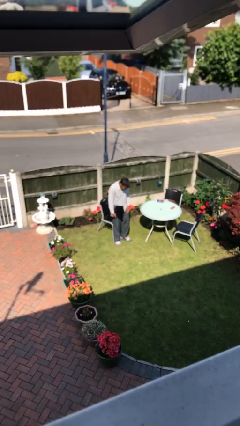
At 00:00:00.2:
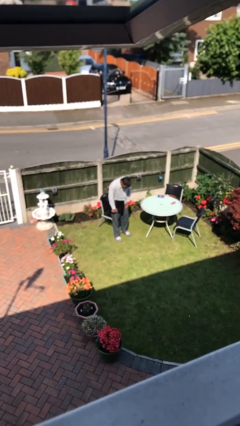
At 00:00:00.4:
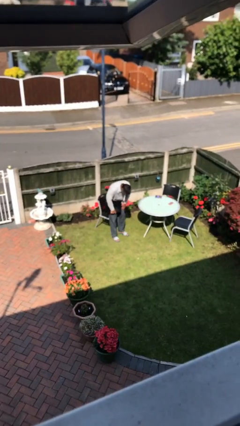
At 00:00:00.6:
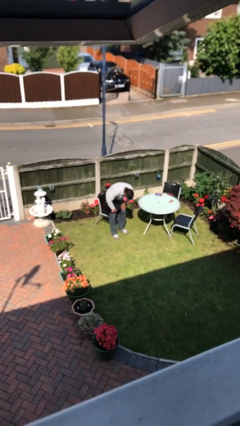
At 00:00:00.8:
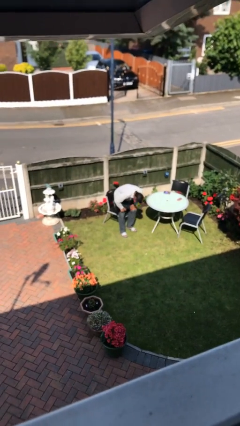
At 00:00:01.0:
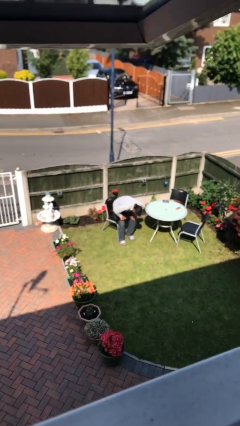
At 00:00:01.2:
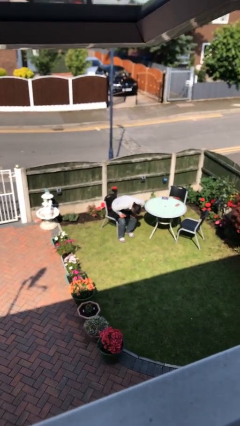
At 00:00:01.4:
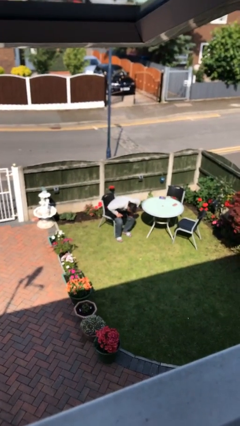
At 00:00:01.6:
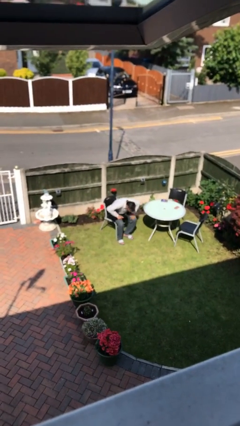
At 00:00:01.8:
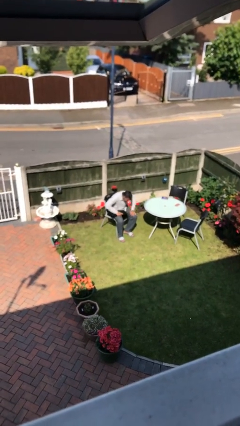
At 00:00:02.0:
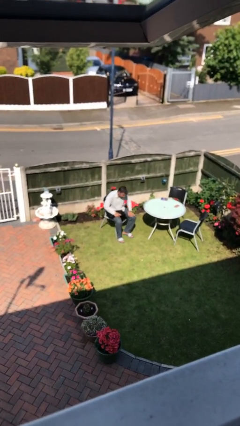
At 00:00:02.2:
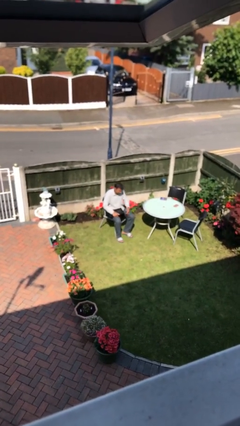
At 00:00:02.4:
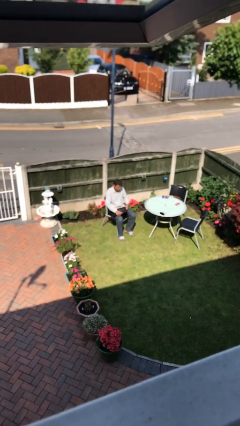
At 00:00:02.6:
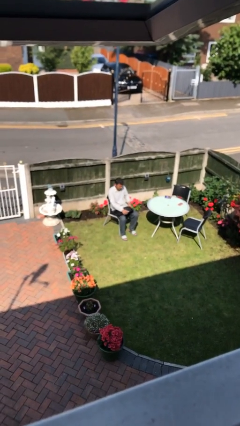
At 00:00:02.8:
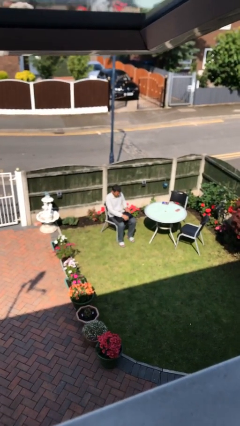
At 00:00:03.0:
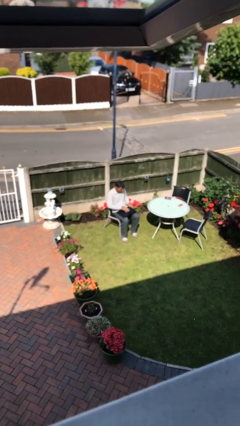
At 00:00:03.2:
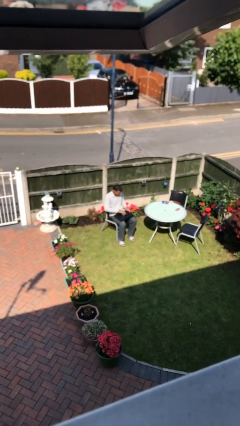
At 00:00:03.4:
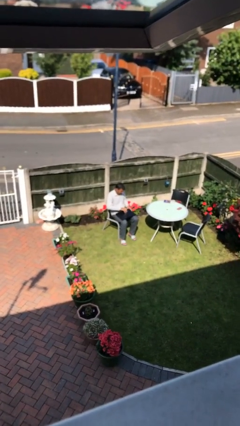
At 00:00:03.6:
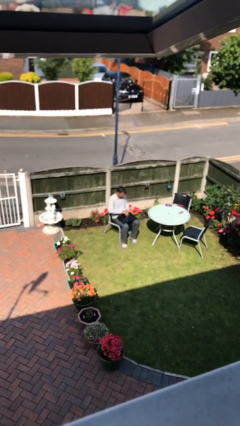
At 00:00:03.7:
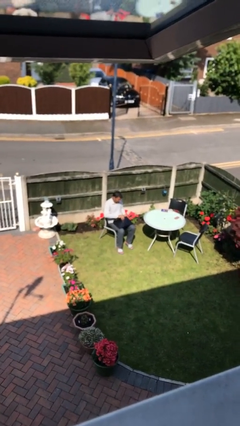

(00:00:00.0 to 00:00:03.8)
person sits down

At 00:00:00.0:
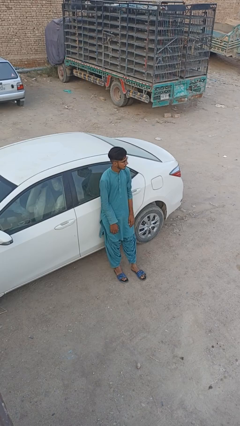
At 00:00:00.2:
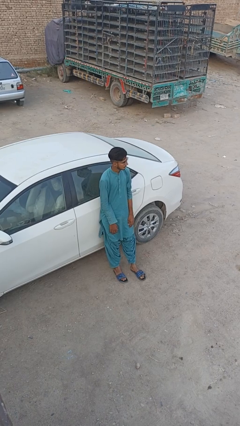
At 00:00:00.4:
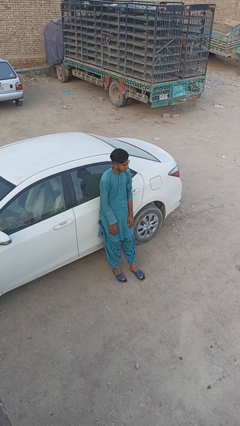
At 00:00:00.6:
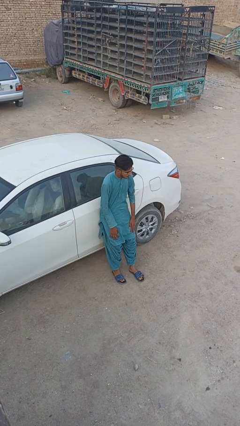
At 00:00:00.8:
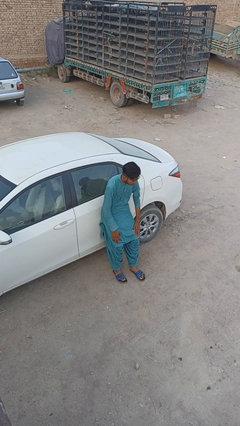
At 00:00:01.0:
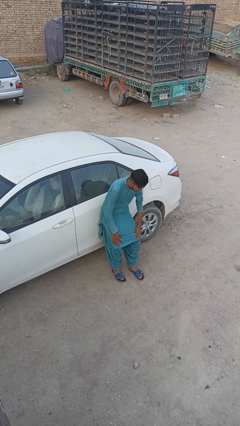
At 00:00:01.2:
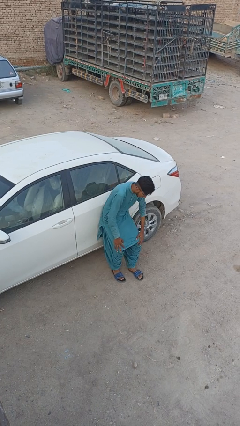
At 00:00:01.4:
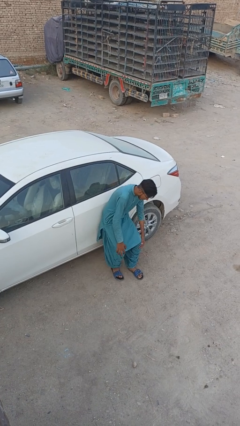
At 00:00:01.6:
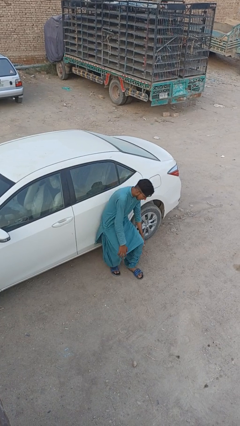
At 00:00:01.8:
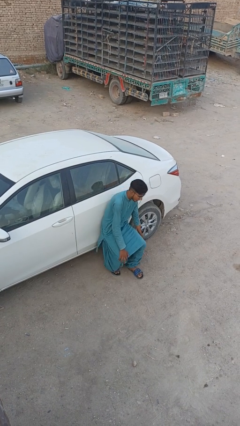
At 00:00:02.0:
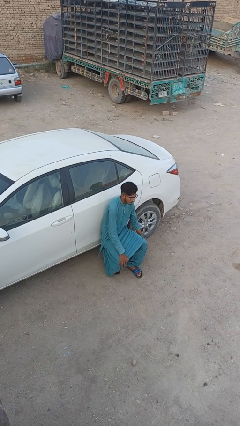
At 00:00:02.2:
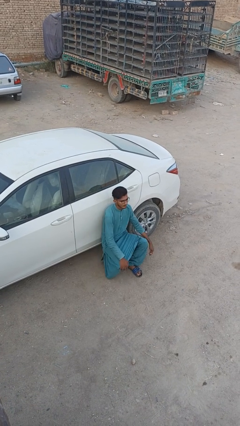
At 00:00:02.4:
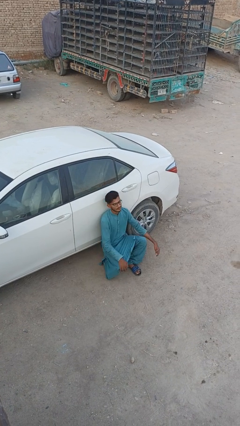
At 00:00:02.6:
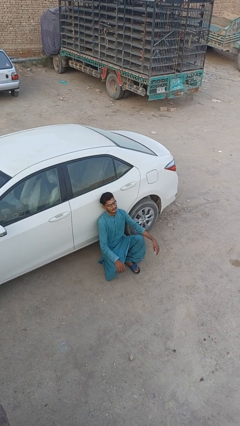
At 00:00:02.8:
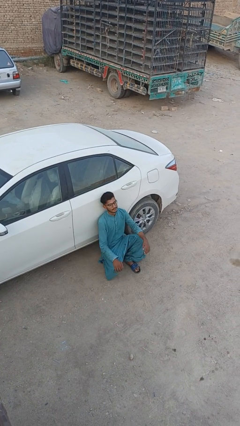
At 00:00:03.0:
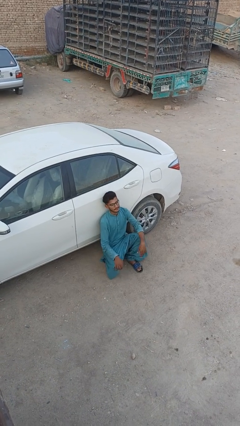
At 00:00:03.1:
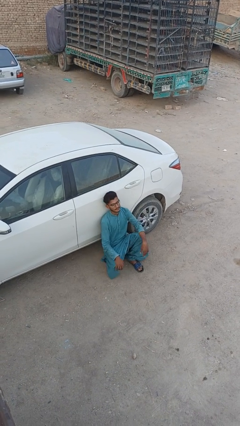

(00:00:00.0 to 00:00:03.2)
person leans against car

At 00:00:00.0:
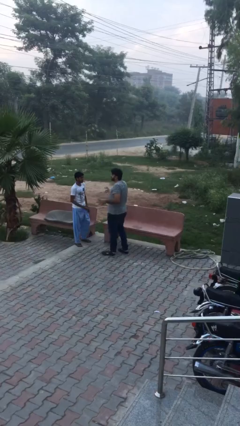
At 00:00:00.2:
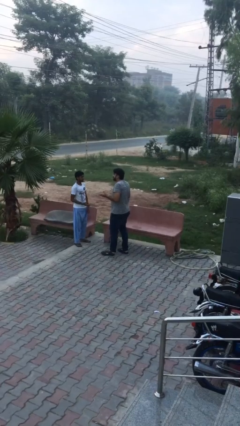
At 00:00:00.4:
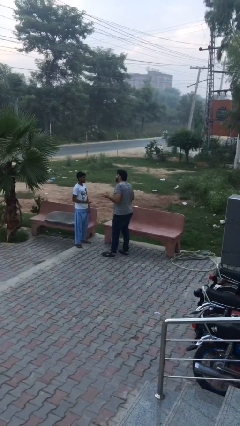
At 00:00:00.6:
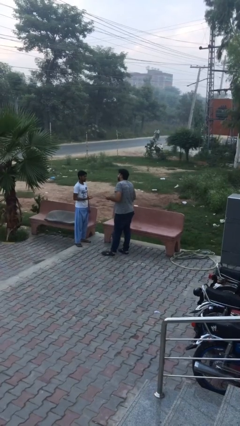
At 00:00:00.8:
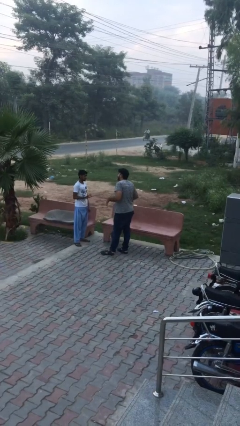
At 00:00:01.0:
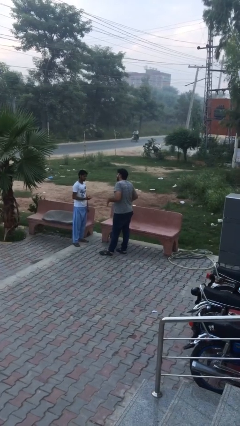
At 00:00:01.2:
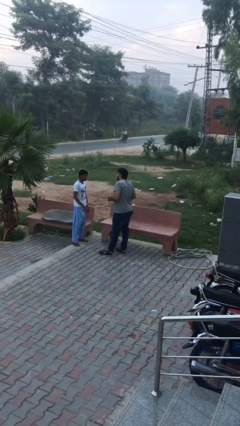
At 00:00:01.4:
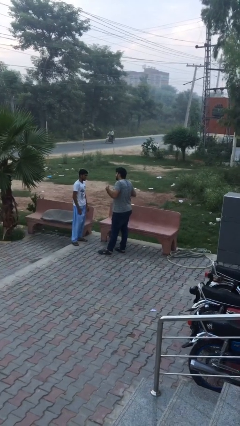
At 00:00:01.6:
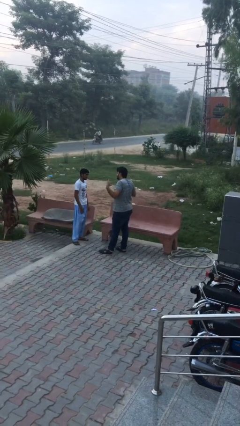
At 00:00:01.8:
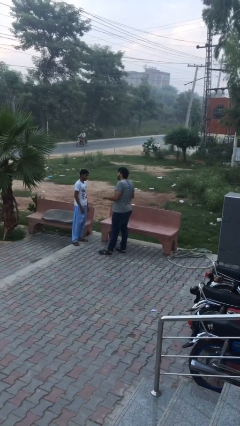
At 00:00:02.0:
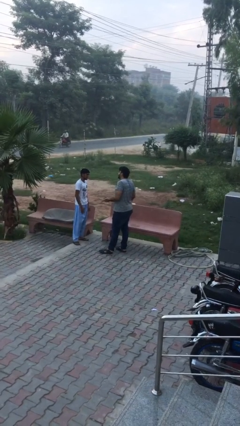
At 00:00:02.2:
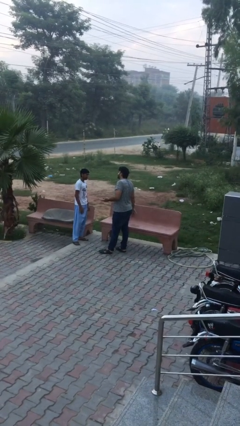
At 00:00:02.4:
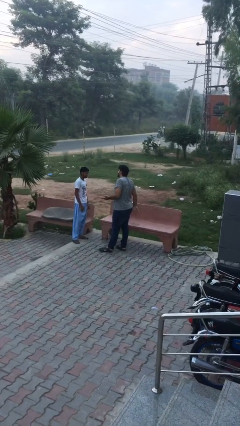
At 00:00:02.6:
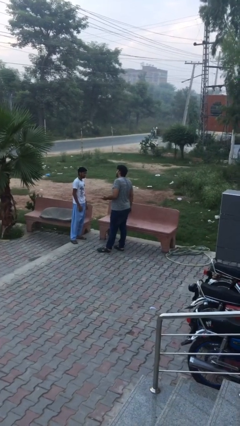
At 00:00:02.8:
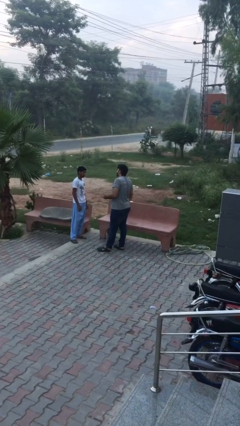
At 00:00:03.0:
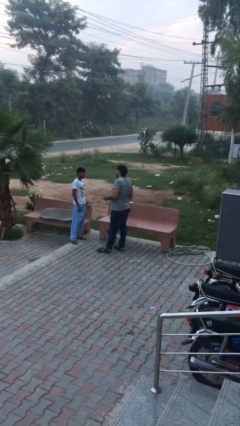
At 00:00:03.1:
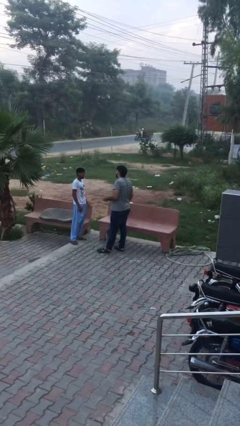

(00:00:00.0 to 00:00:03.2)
person talks to person

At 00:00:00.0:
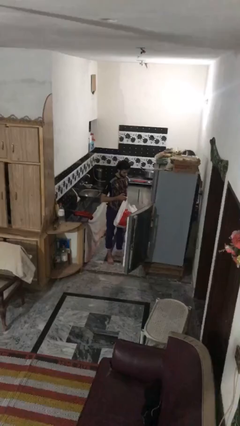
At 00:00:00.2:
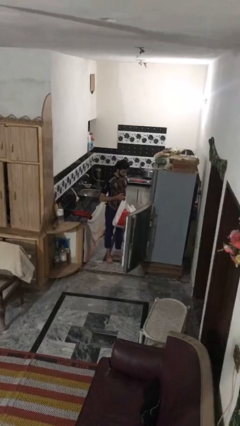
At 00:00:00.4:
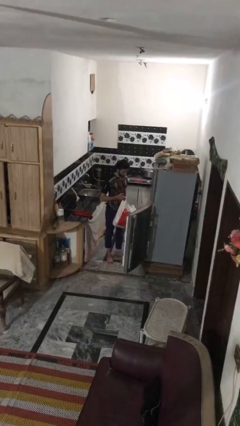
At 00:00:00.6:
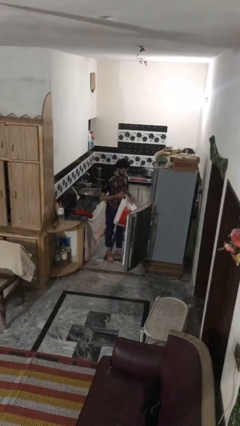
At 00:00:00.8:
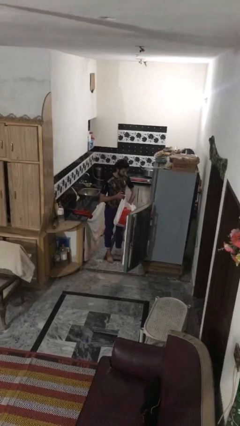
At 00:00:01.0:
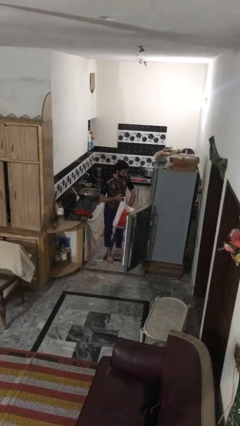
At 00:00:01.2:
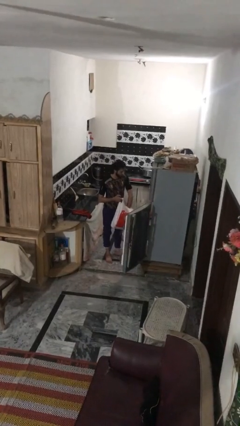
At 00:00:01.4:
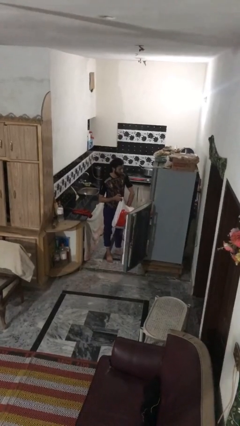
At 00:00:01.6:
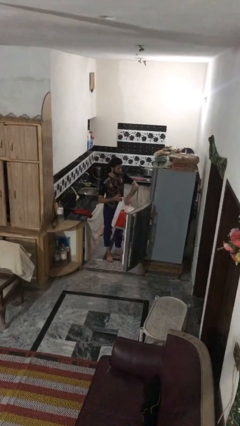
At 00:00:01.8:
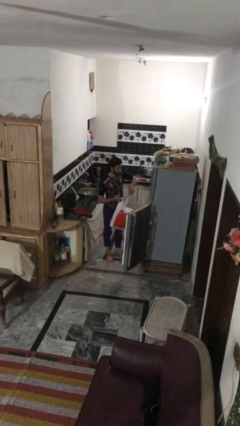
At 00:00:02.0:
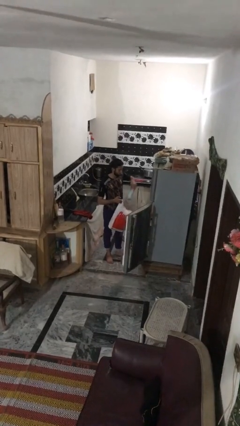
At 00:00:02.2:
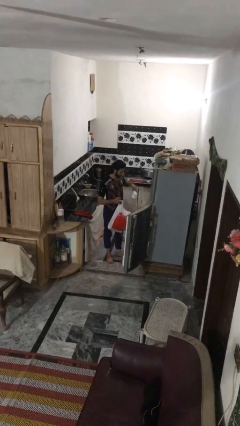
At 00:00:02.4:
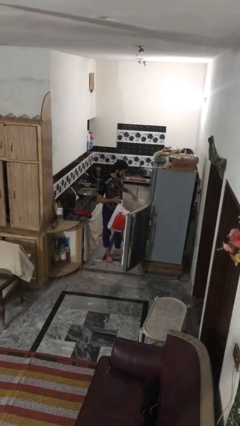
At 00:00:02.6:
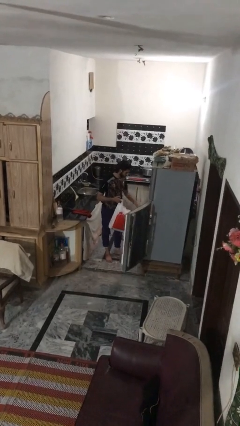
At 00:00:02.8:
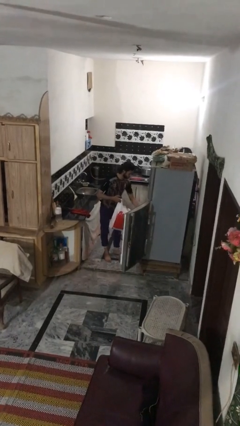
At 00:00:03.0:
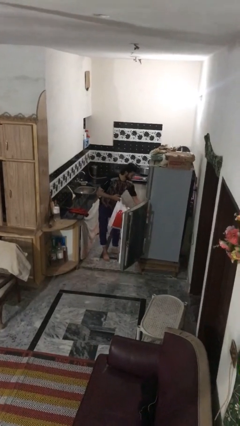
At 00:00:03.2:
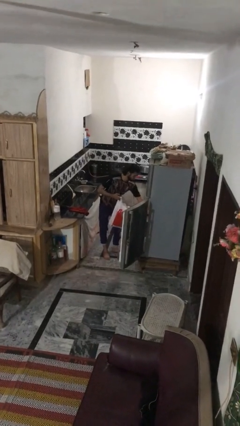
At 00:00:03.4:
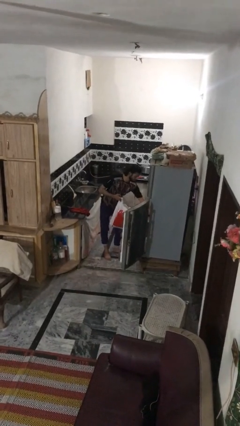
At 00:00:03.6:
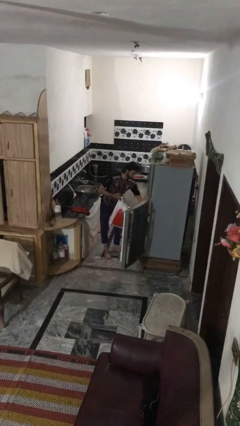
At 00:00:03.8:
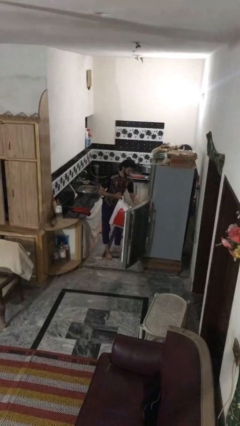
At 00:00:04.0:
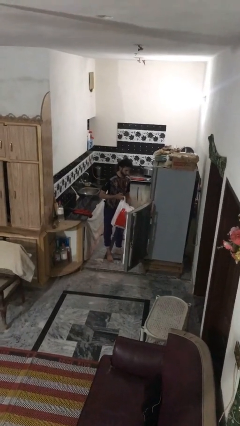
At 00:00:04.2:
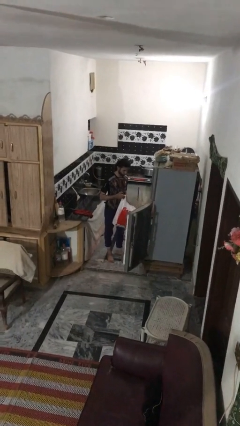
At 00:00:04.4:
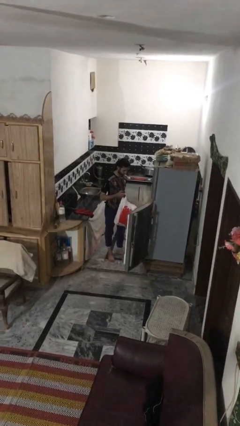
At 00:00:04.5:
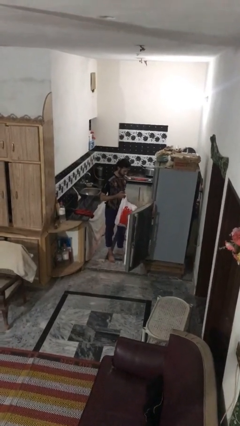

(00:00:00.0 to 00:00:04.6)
person loads groceries into refrigerator

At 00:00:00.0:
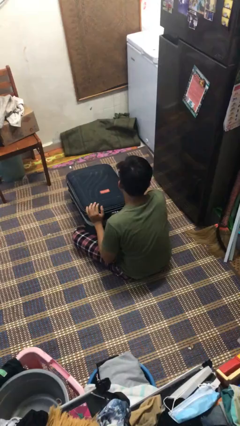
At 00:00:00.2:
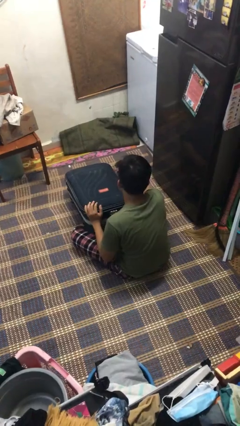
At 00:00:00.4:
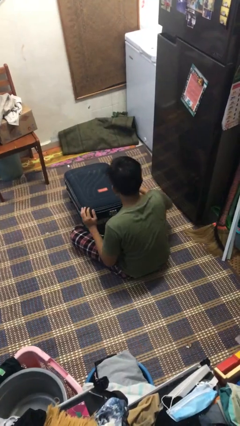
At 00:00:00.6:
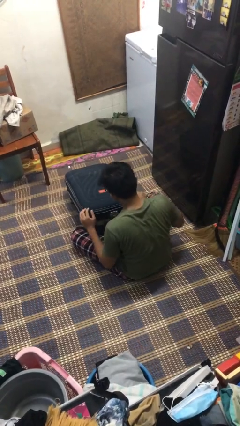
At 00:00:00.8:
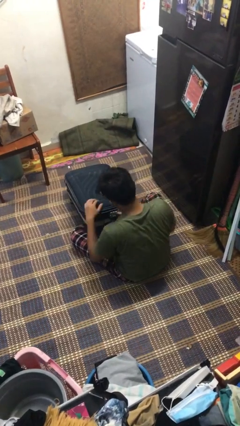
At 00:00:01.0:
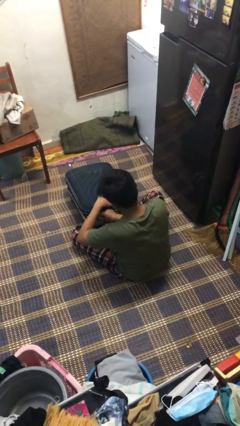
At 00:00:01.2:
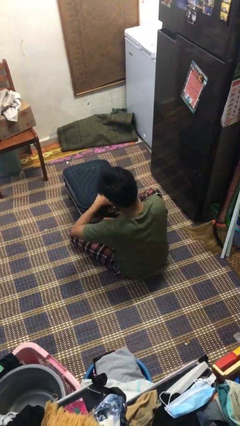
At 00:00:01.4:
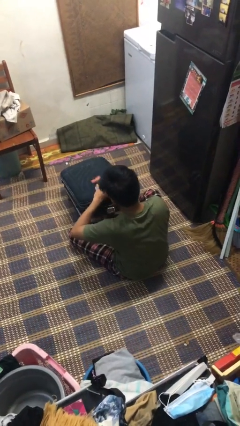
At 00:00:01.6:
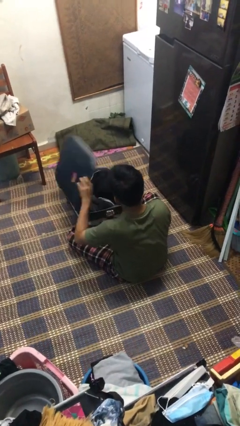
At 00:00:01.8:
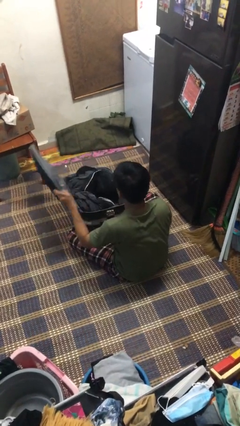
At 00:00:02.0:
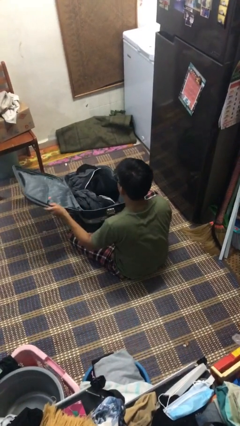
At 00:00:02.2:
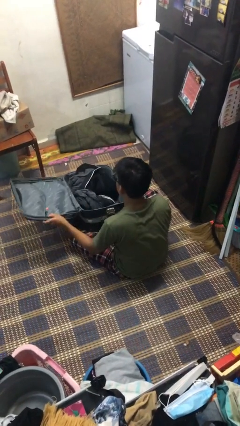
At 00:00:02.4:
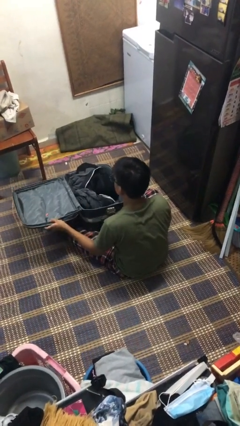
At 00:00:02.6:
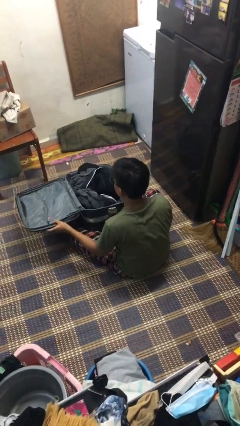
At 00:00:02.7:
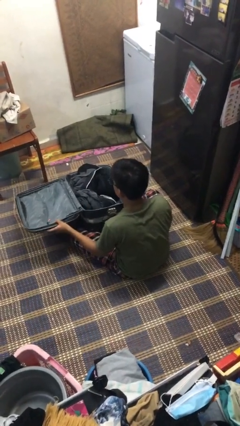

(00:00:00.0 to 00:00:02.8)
person opens suitcase
